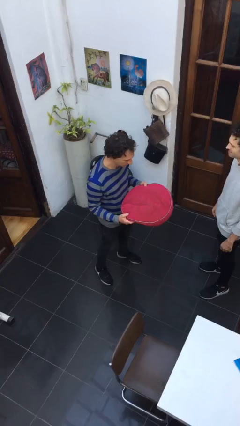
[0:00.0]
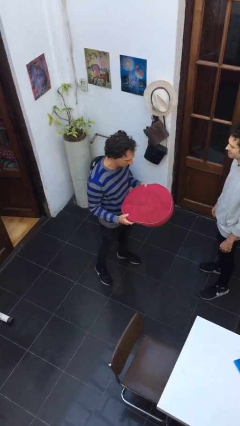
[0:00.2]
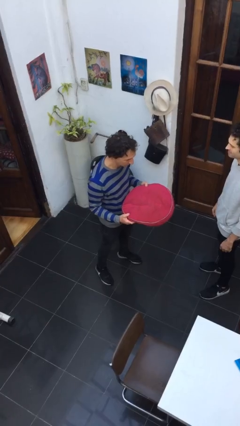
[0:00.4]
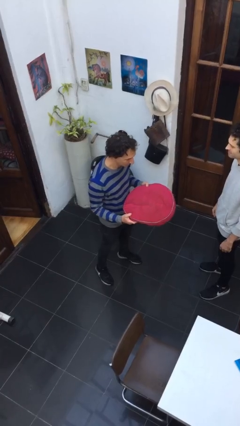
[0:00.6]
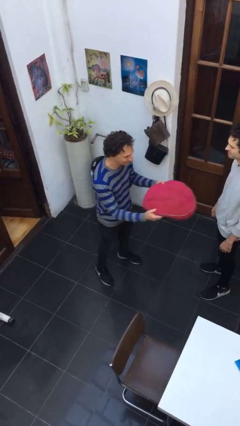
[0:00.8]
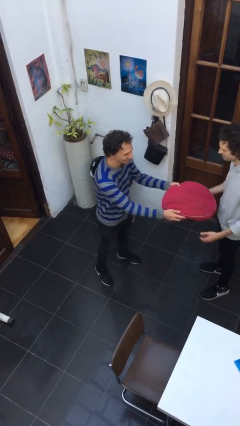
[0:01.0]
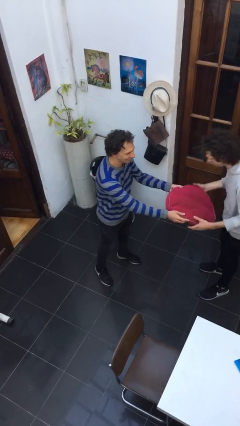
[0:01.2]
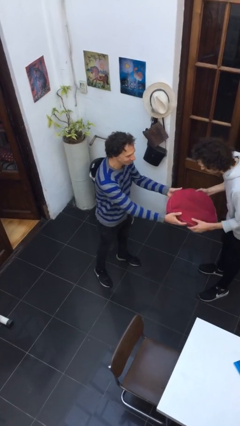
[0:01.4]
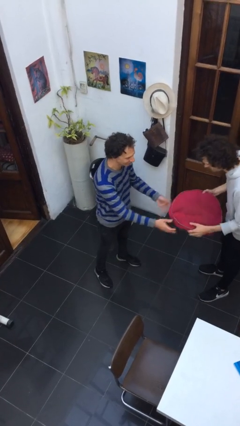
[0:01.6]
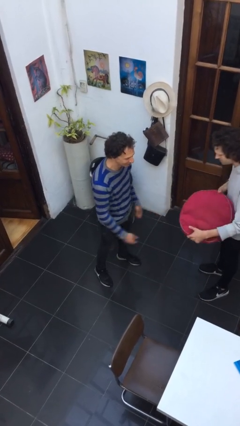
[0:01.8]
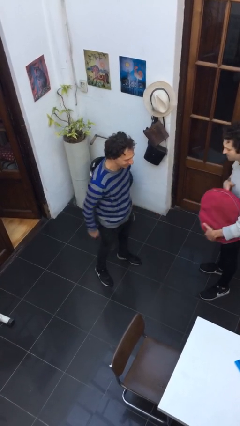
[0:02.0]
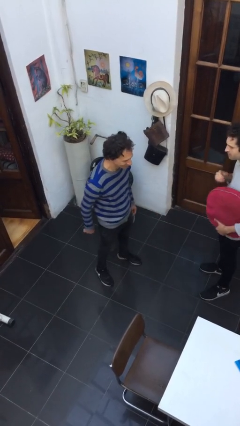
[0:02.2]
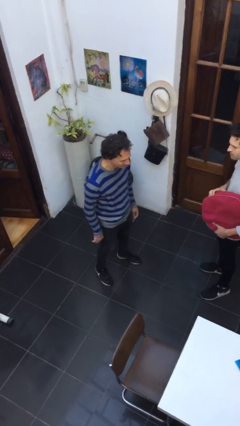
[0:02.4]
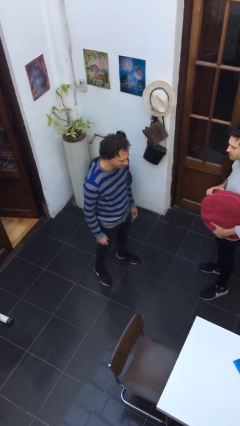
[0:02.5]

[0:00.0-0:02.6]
person transfers object to person

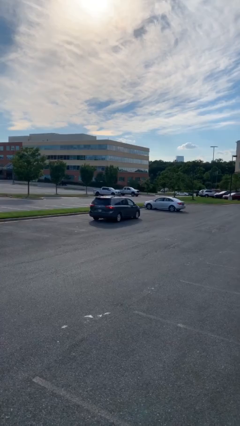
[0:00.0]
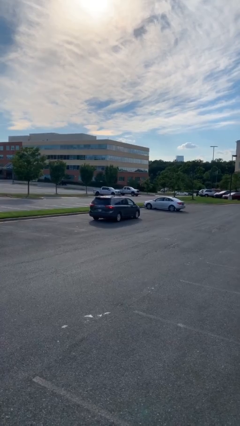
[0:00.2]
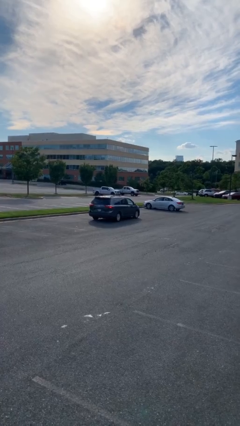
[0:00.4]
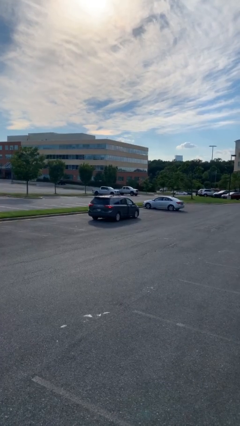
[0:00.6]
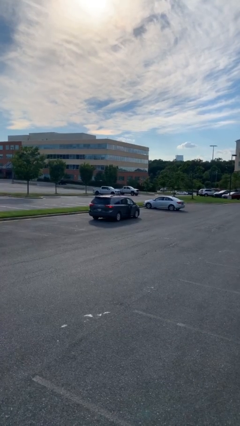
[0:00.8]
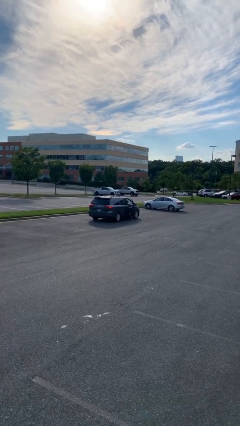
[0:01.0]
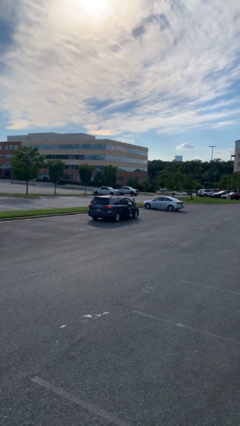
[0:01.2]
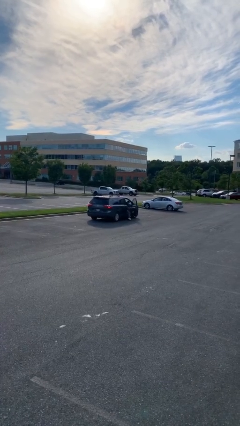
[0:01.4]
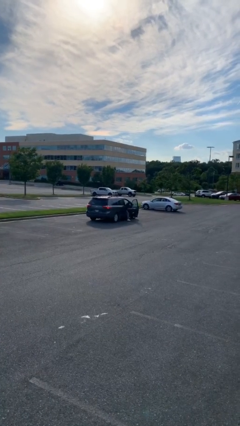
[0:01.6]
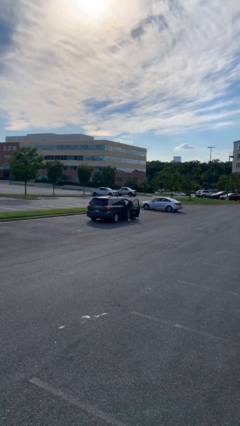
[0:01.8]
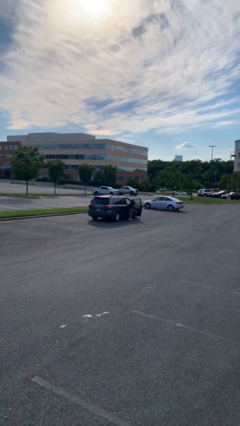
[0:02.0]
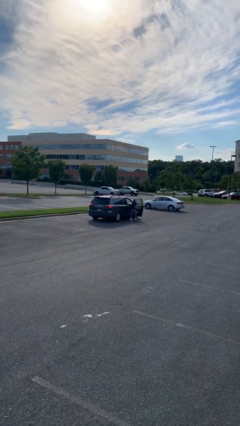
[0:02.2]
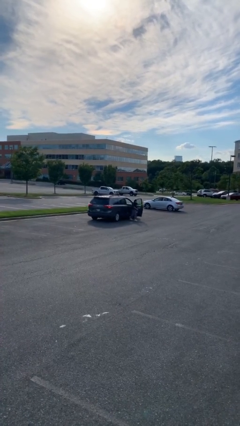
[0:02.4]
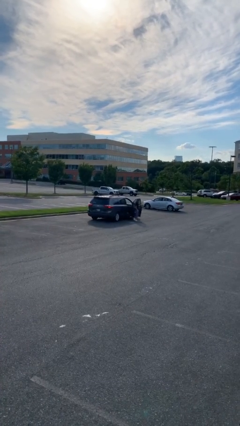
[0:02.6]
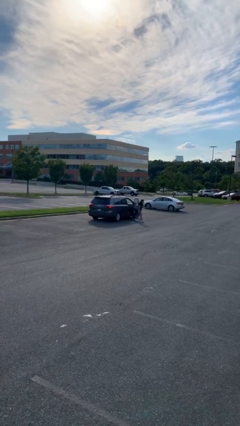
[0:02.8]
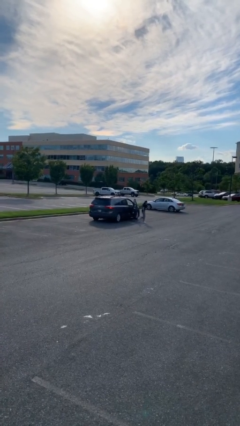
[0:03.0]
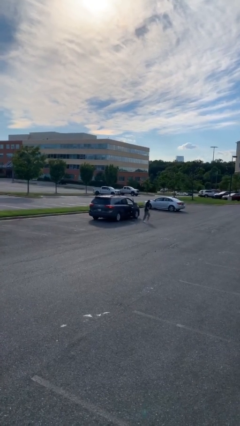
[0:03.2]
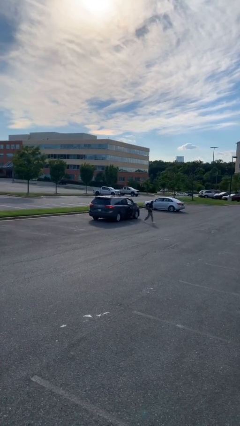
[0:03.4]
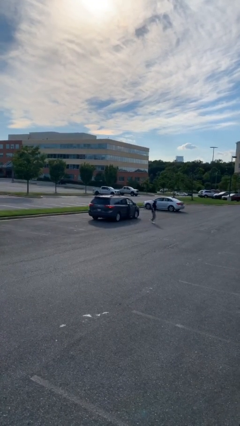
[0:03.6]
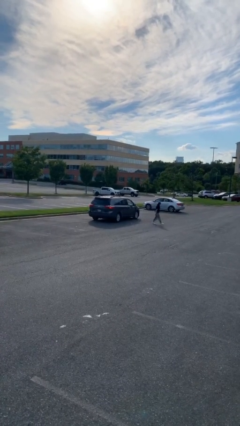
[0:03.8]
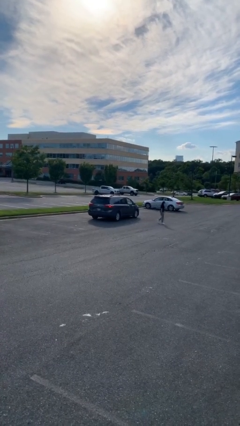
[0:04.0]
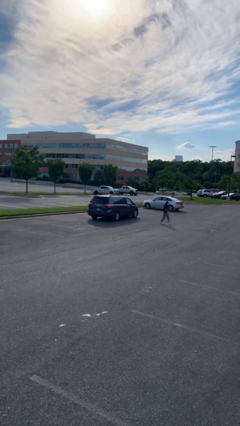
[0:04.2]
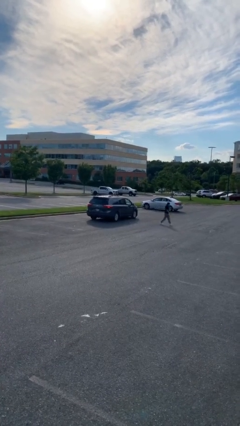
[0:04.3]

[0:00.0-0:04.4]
car drops off person

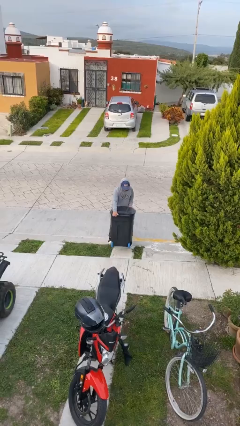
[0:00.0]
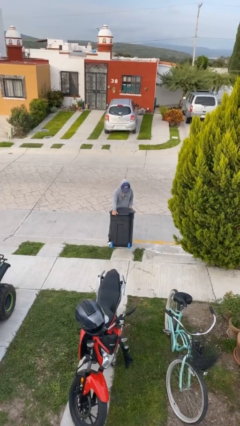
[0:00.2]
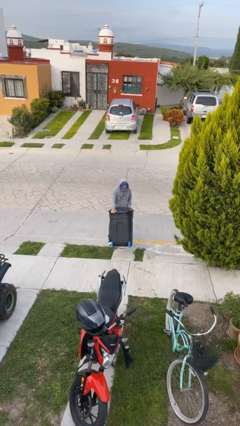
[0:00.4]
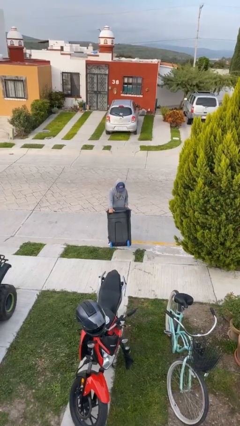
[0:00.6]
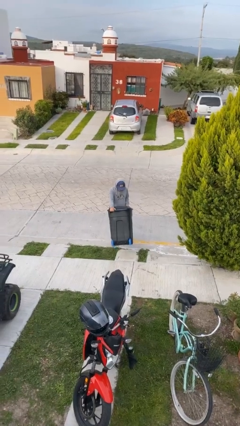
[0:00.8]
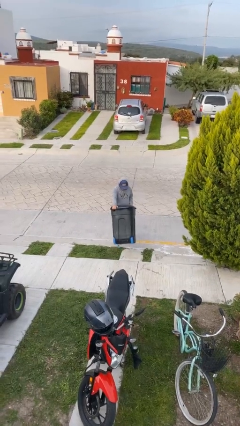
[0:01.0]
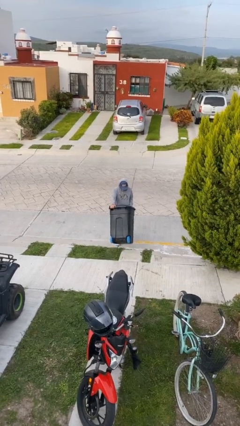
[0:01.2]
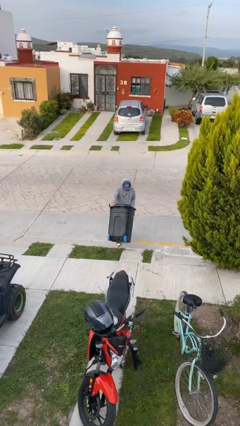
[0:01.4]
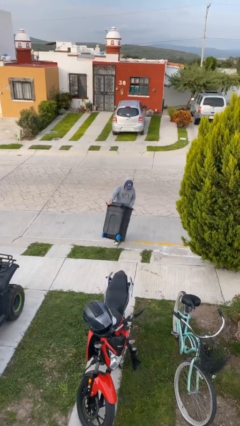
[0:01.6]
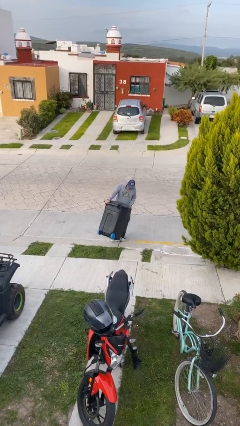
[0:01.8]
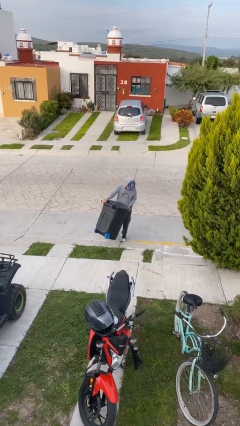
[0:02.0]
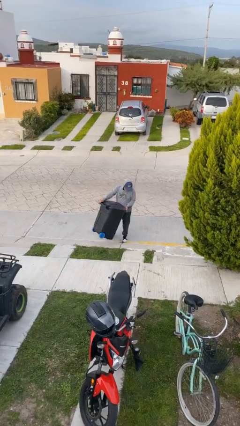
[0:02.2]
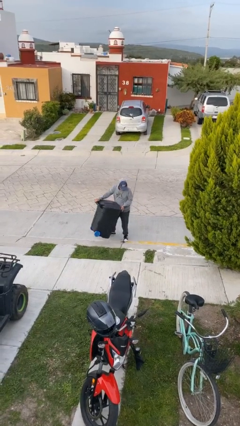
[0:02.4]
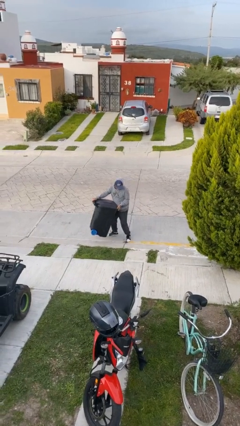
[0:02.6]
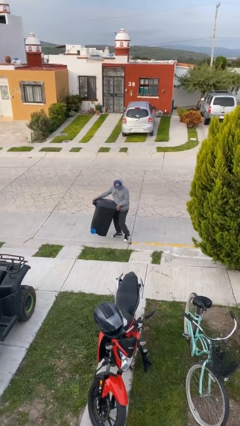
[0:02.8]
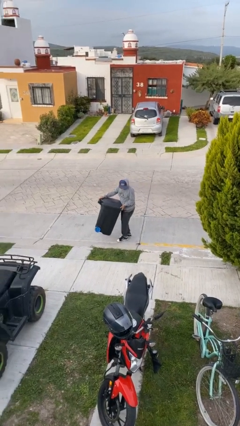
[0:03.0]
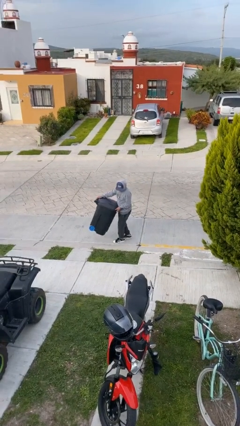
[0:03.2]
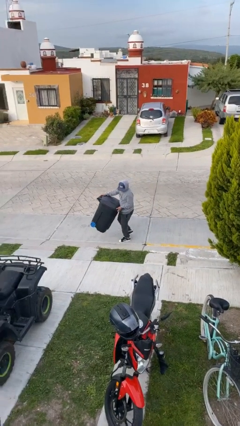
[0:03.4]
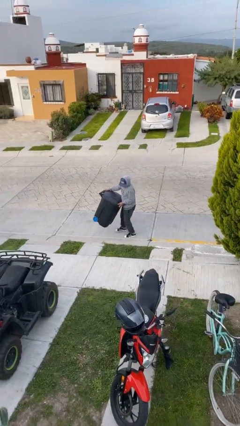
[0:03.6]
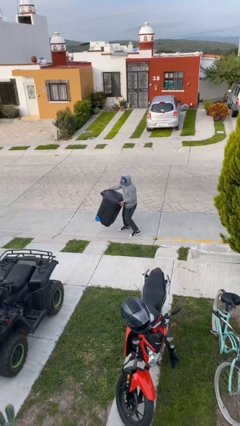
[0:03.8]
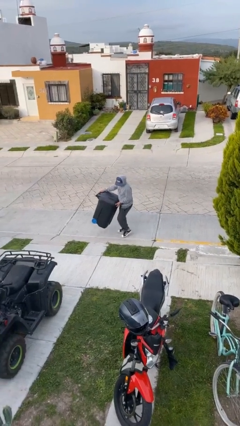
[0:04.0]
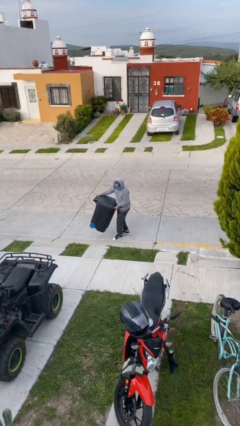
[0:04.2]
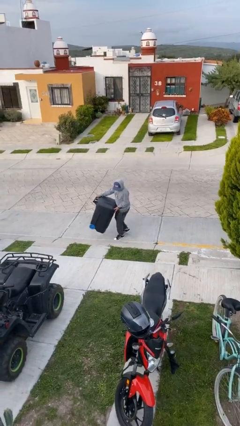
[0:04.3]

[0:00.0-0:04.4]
person carries heavy object

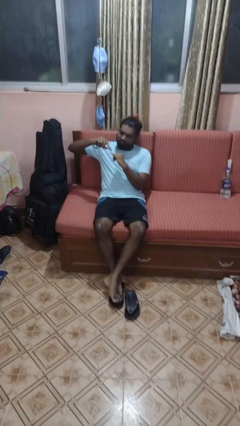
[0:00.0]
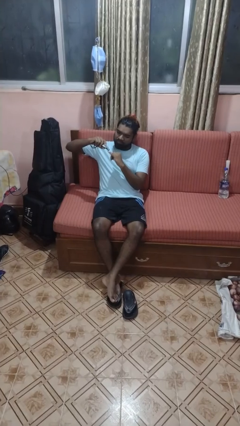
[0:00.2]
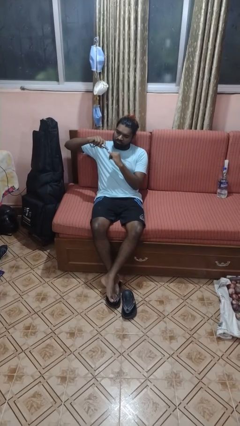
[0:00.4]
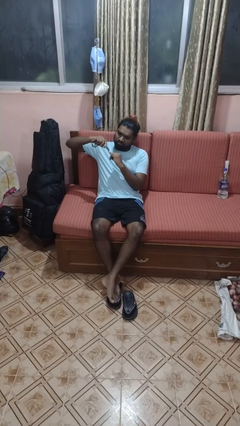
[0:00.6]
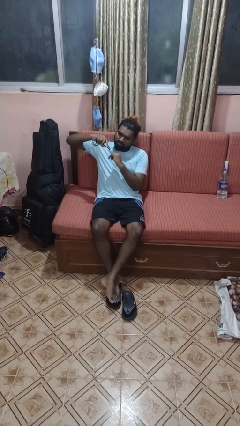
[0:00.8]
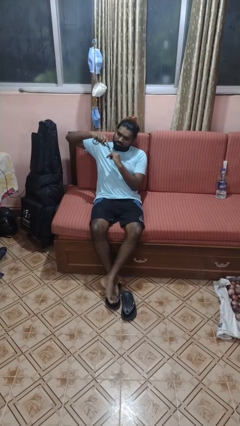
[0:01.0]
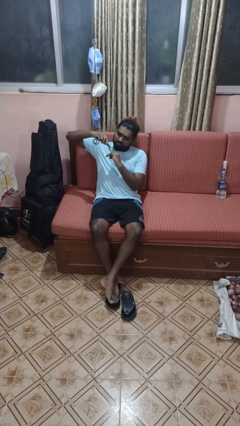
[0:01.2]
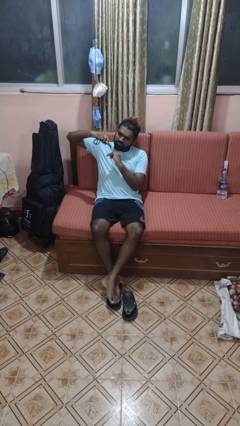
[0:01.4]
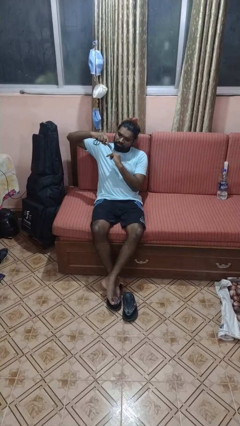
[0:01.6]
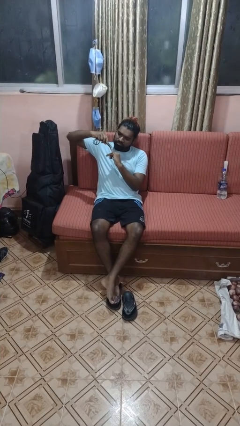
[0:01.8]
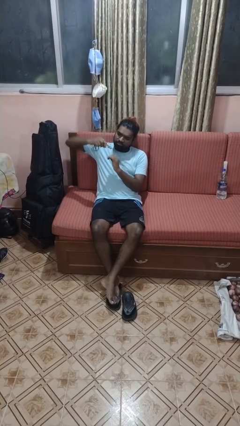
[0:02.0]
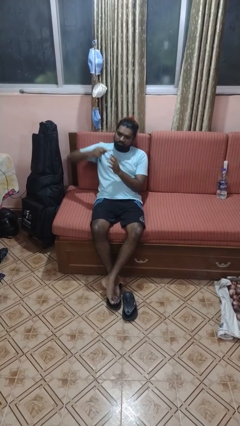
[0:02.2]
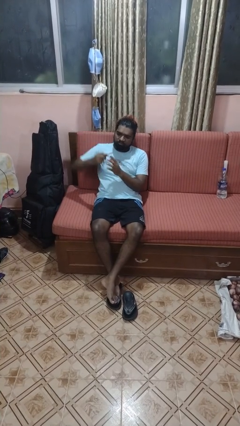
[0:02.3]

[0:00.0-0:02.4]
person clips fingernails

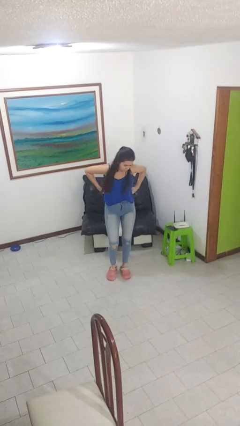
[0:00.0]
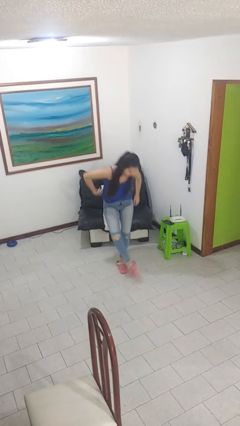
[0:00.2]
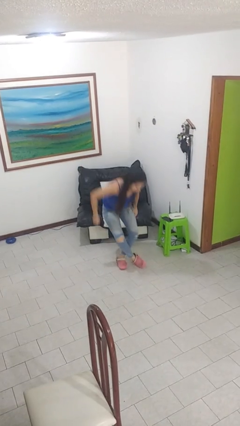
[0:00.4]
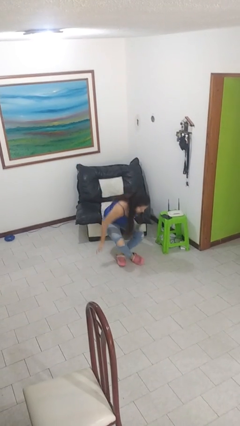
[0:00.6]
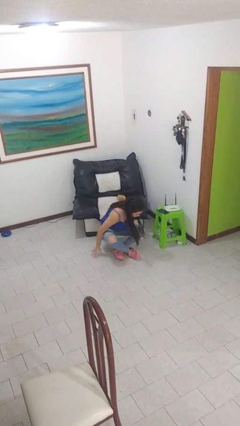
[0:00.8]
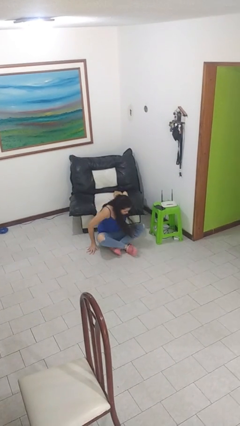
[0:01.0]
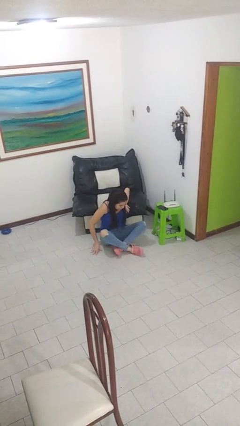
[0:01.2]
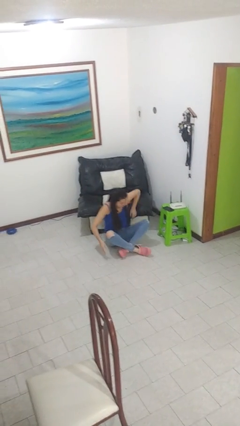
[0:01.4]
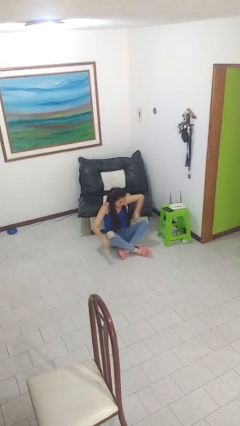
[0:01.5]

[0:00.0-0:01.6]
person sits crisscross

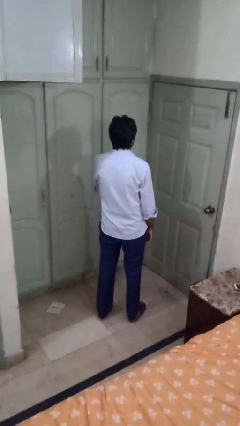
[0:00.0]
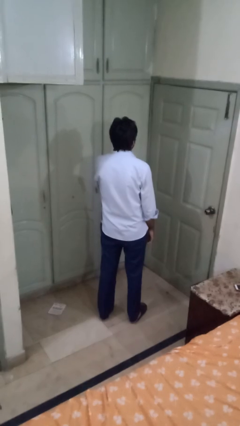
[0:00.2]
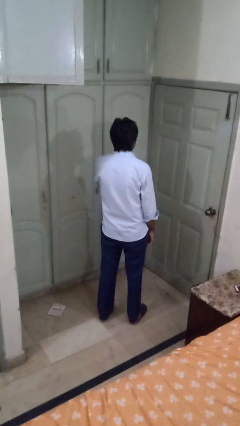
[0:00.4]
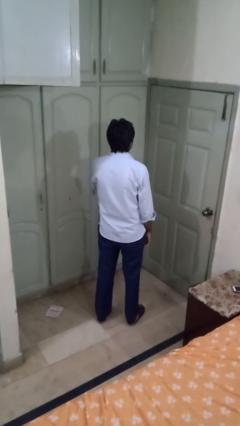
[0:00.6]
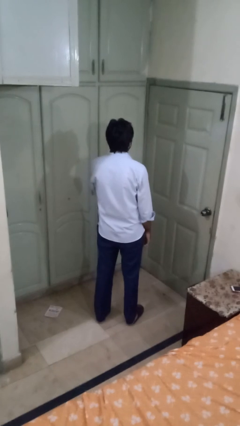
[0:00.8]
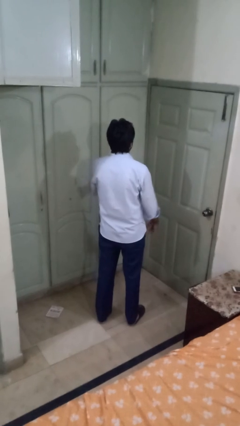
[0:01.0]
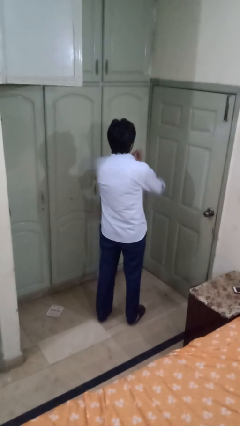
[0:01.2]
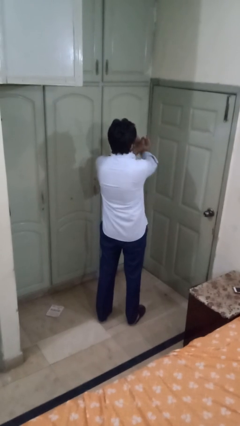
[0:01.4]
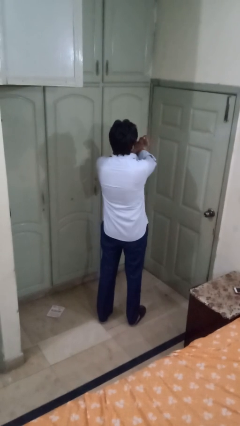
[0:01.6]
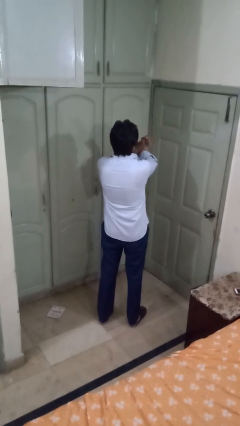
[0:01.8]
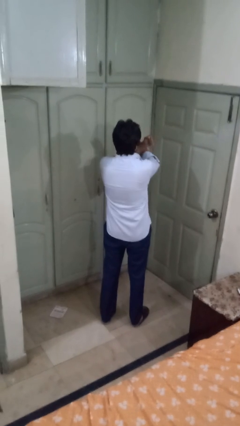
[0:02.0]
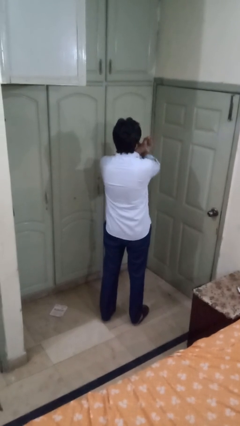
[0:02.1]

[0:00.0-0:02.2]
person gestures arms x
